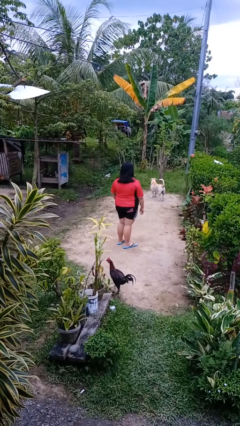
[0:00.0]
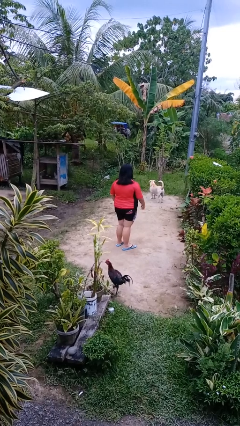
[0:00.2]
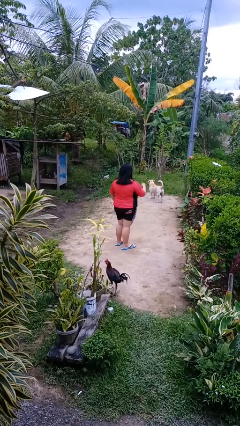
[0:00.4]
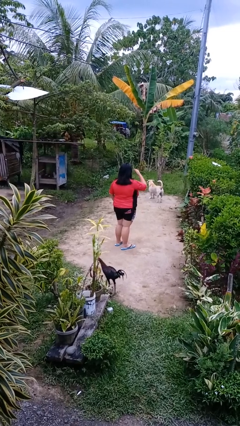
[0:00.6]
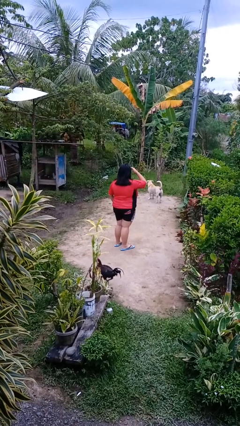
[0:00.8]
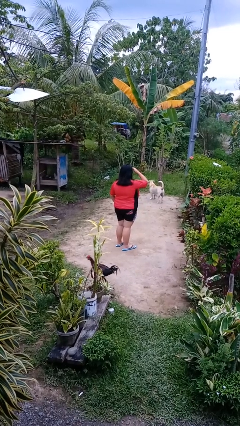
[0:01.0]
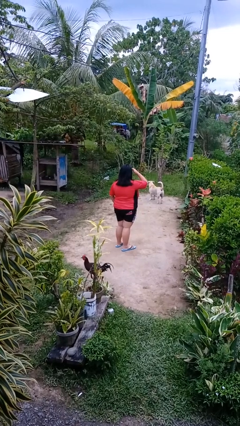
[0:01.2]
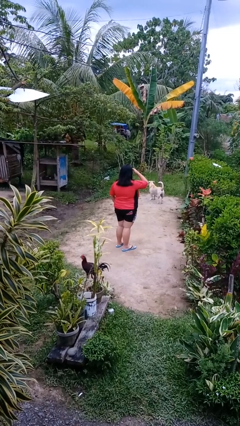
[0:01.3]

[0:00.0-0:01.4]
person shades eyes

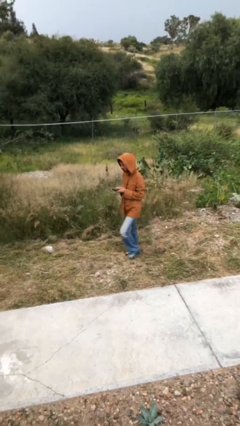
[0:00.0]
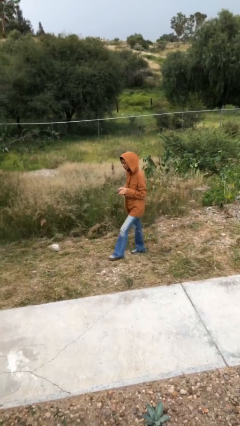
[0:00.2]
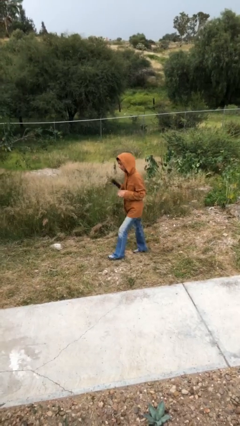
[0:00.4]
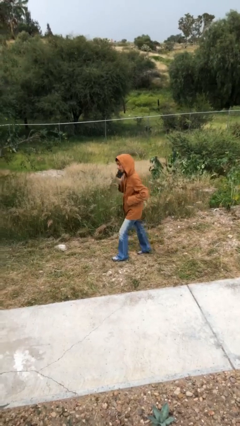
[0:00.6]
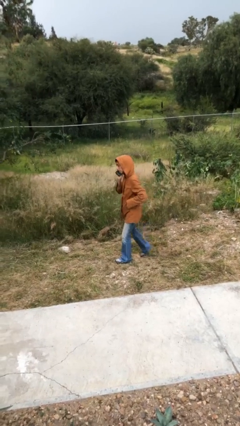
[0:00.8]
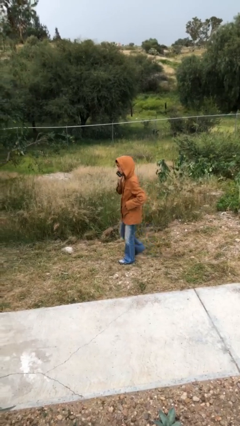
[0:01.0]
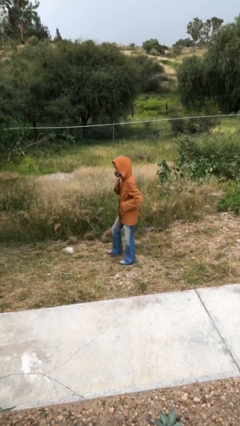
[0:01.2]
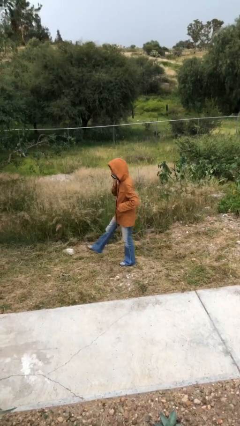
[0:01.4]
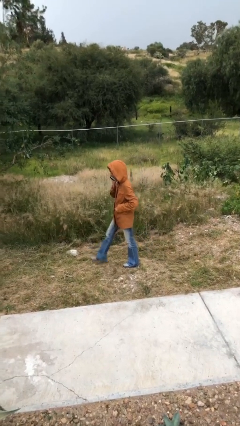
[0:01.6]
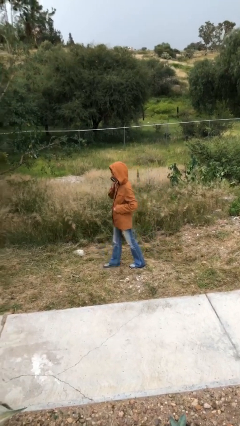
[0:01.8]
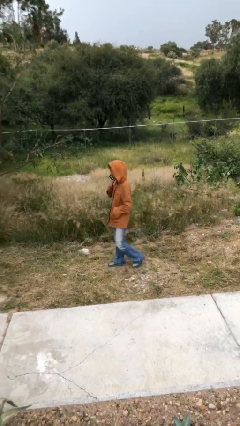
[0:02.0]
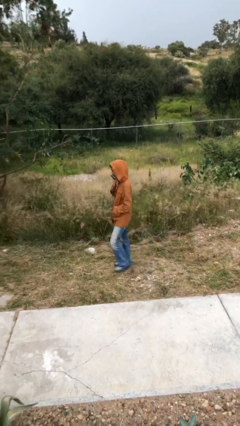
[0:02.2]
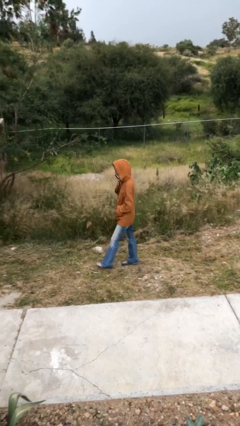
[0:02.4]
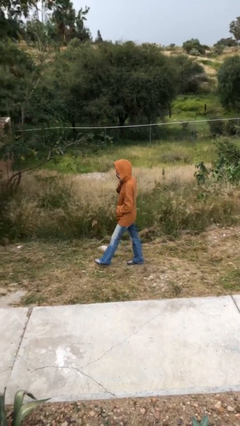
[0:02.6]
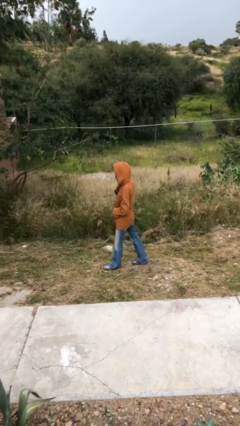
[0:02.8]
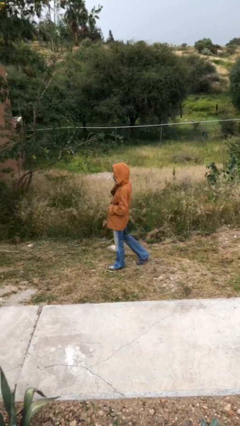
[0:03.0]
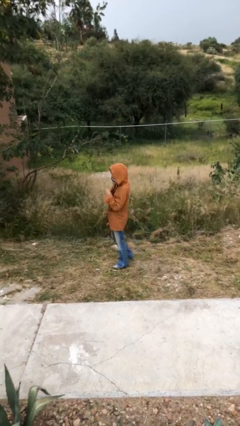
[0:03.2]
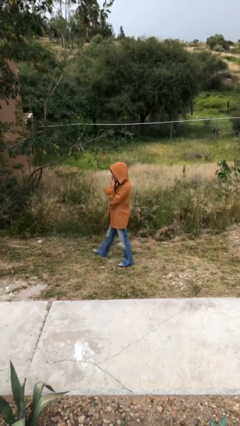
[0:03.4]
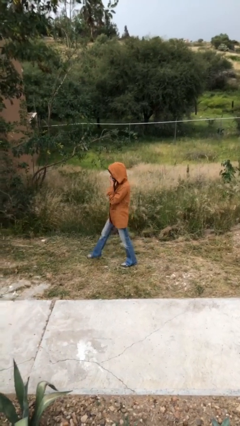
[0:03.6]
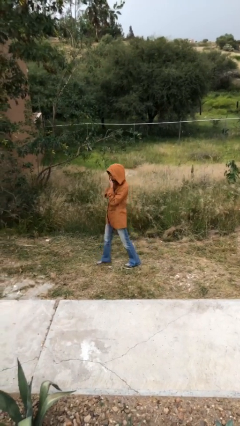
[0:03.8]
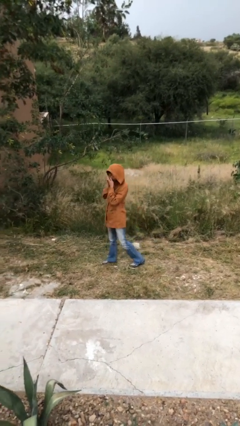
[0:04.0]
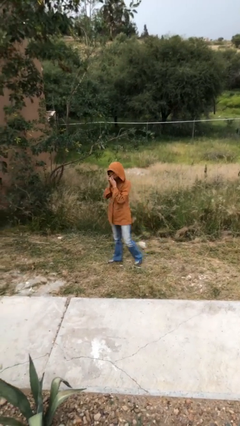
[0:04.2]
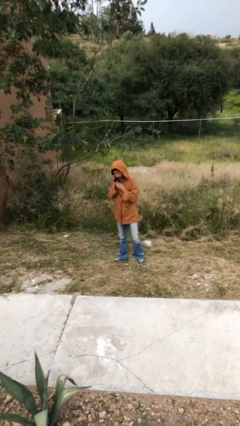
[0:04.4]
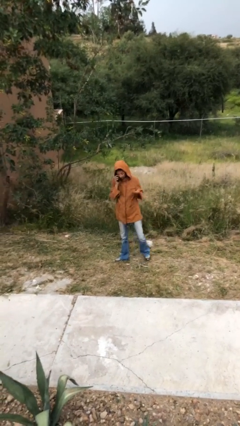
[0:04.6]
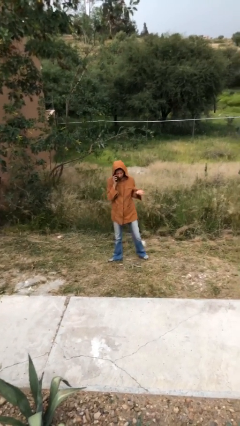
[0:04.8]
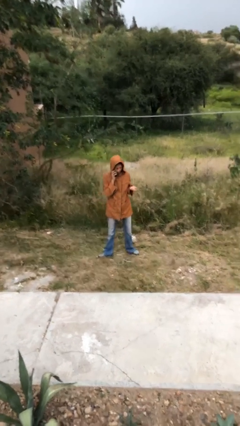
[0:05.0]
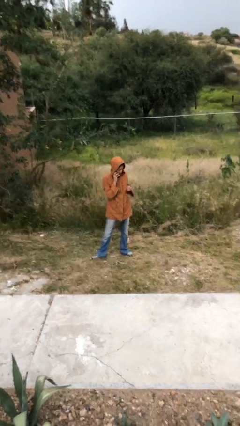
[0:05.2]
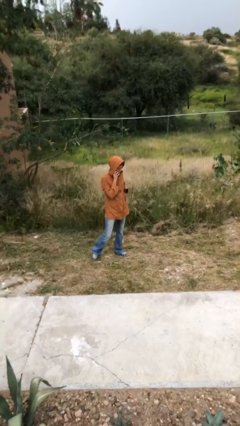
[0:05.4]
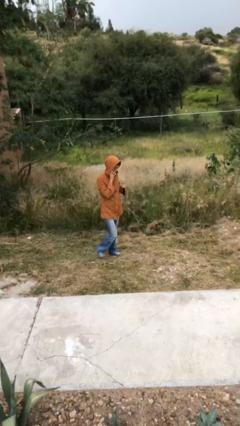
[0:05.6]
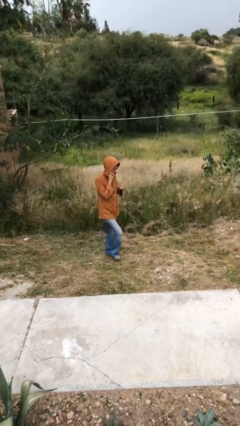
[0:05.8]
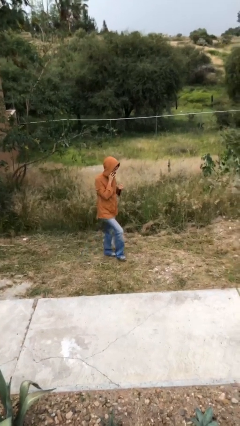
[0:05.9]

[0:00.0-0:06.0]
person talks on phone

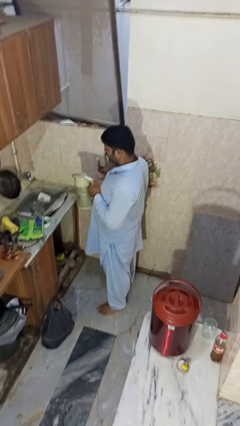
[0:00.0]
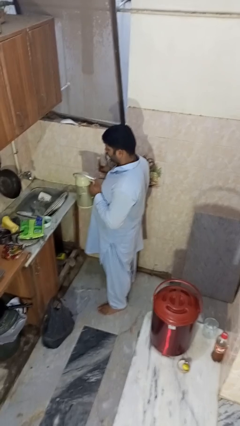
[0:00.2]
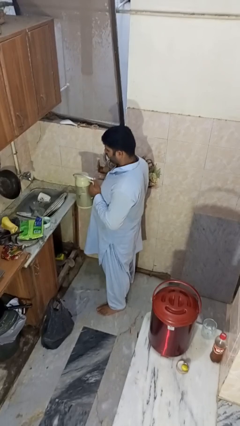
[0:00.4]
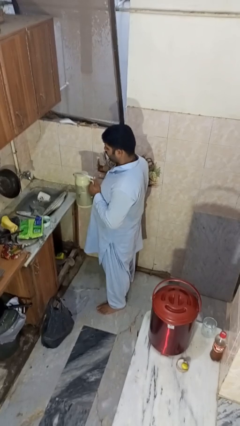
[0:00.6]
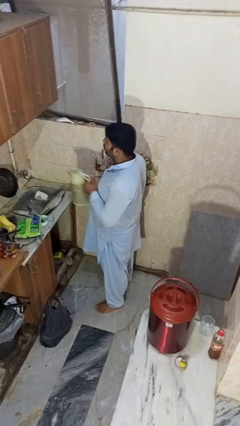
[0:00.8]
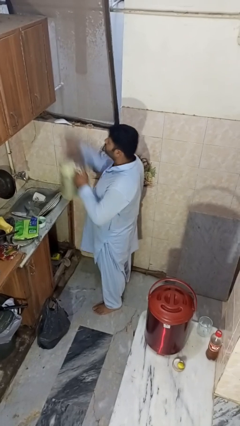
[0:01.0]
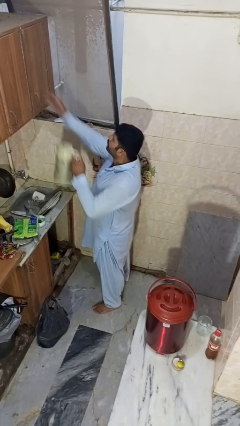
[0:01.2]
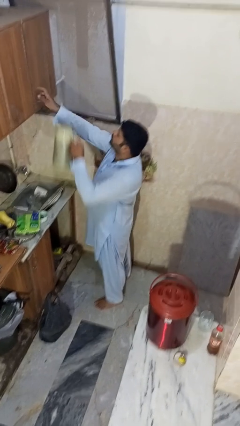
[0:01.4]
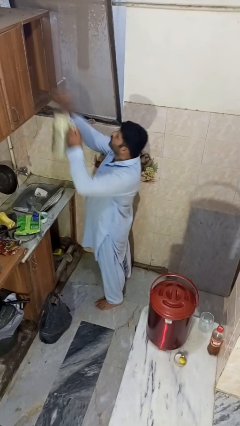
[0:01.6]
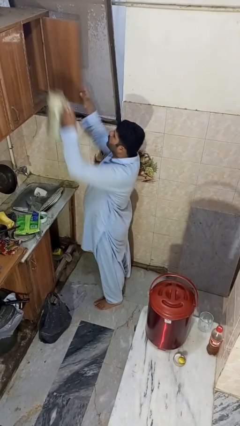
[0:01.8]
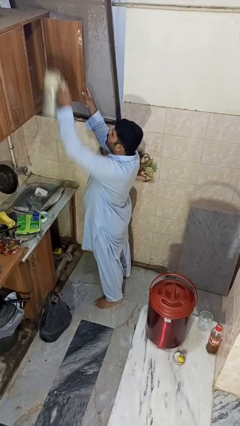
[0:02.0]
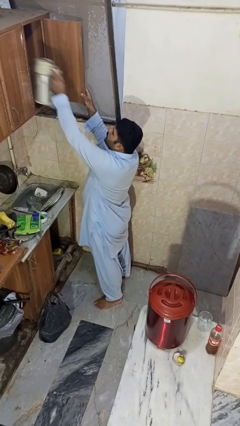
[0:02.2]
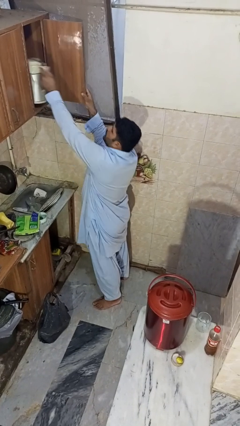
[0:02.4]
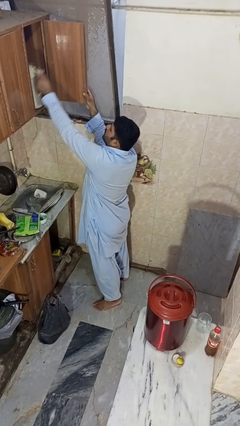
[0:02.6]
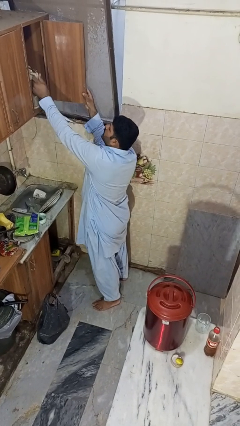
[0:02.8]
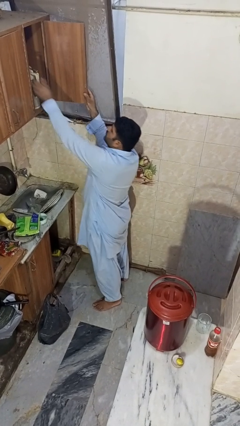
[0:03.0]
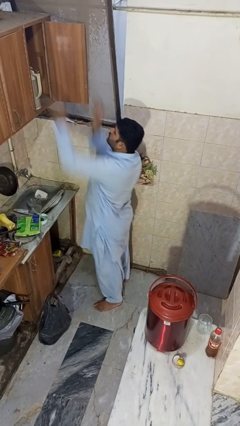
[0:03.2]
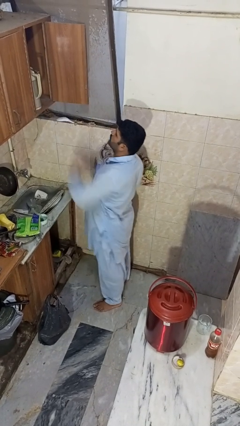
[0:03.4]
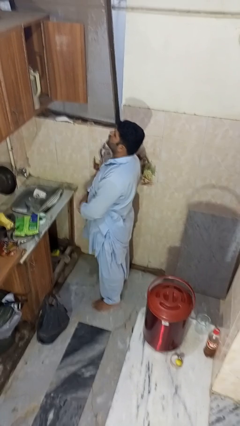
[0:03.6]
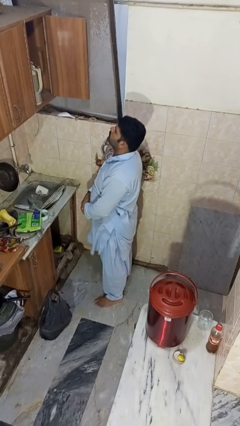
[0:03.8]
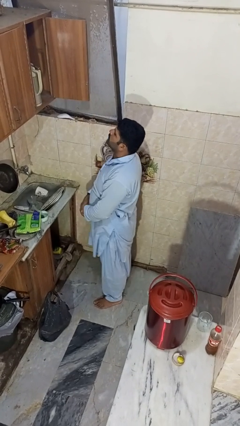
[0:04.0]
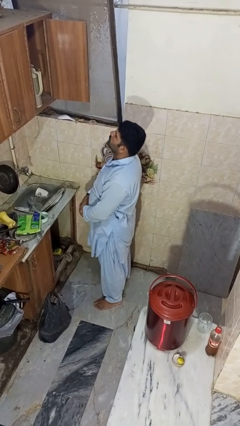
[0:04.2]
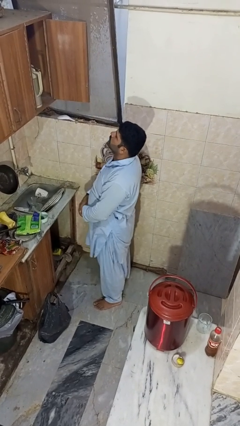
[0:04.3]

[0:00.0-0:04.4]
person puts object in cabinet

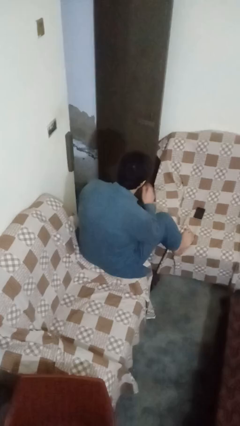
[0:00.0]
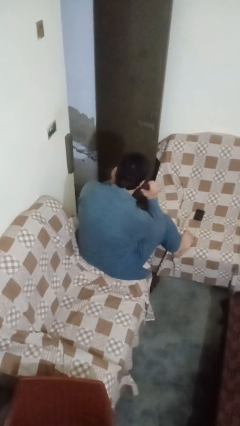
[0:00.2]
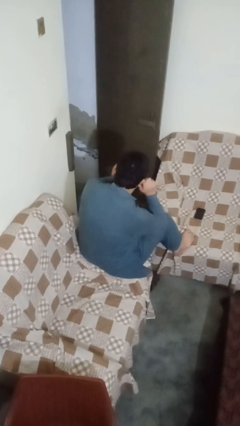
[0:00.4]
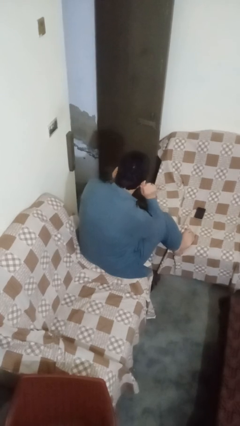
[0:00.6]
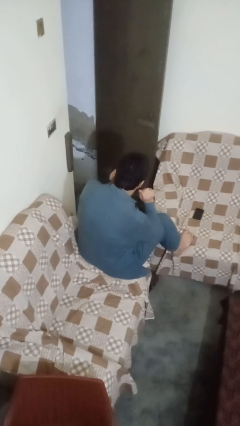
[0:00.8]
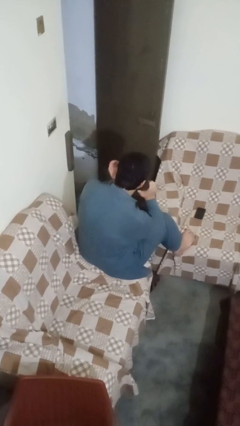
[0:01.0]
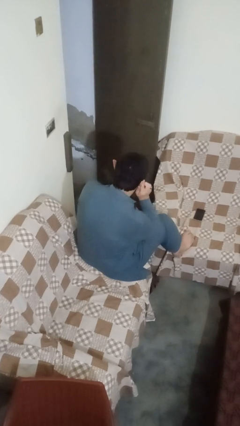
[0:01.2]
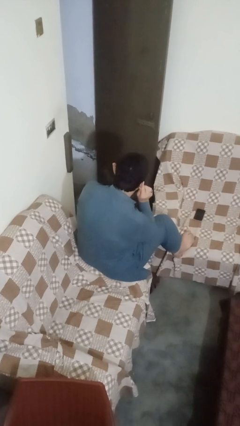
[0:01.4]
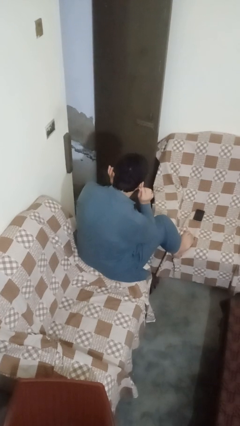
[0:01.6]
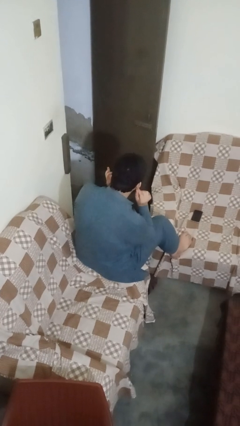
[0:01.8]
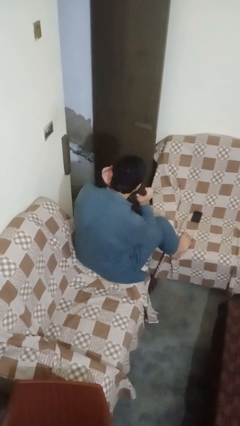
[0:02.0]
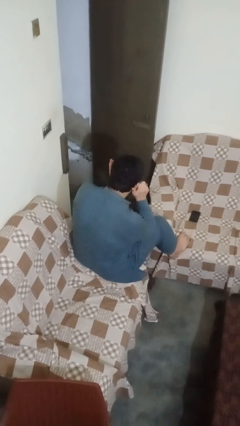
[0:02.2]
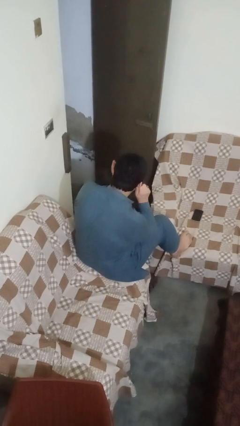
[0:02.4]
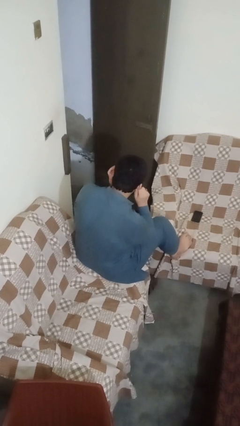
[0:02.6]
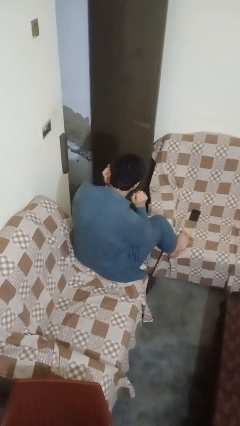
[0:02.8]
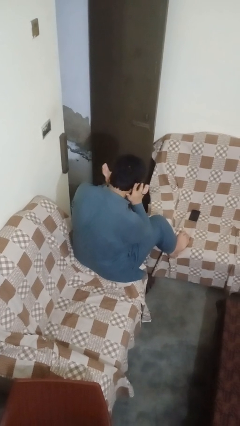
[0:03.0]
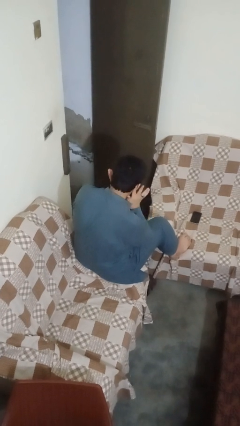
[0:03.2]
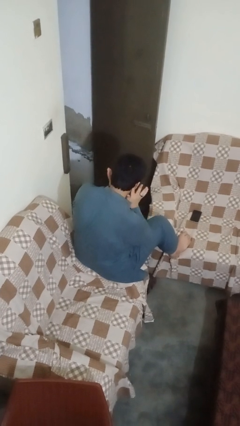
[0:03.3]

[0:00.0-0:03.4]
person touches earlobe

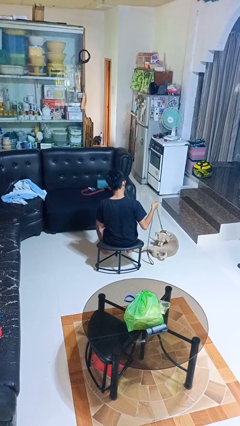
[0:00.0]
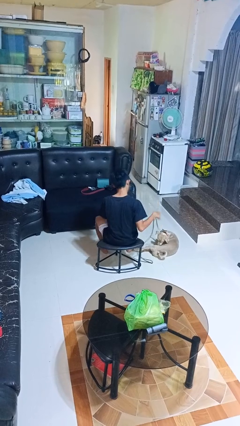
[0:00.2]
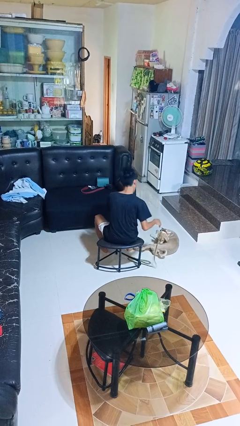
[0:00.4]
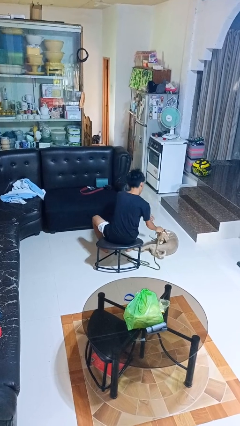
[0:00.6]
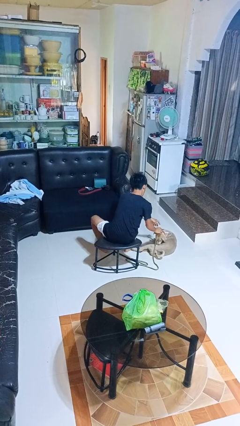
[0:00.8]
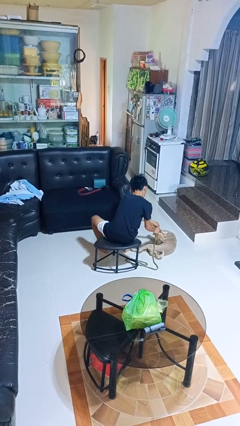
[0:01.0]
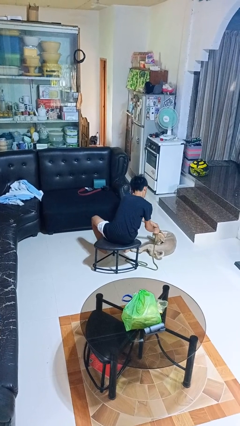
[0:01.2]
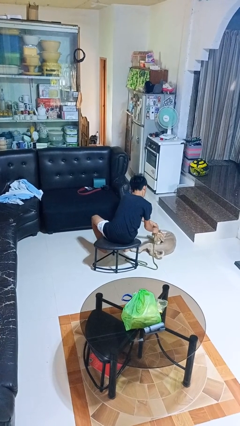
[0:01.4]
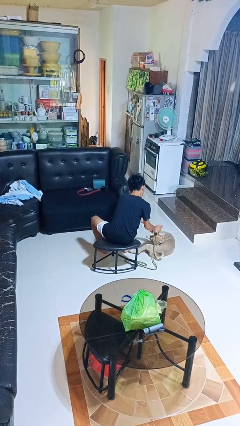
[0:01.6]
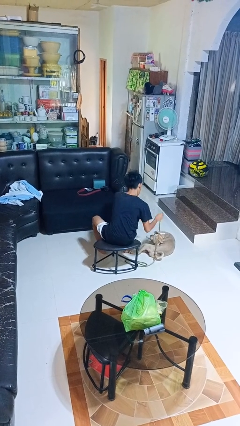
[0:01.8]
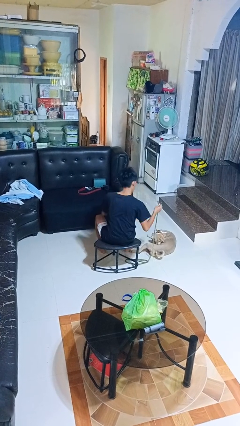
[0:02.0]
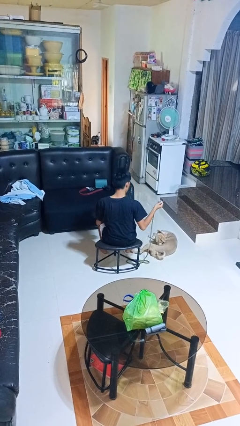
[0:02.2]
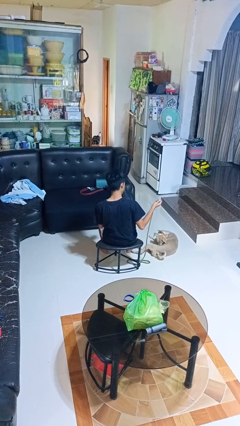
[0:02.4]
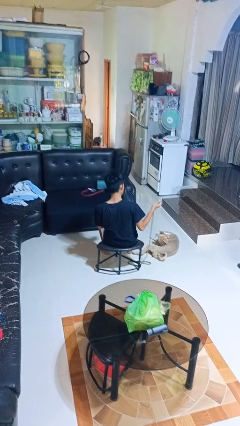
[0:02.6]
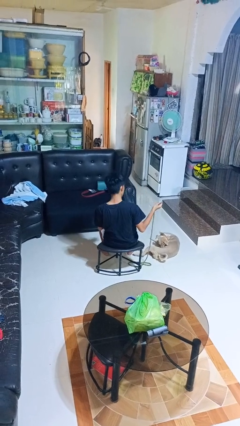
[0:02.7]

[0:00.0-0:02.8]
person unattaches leash from dog
